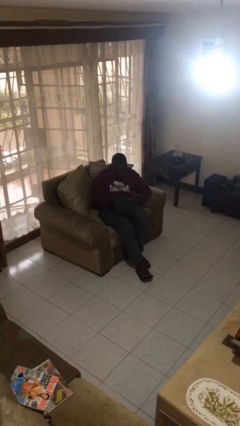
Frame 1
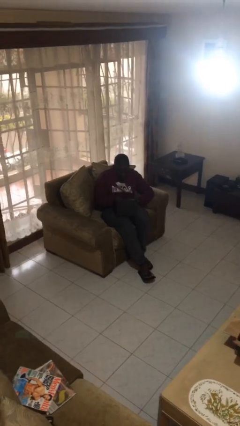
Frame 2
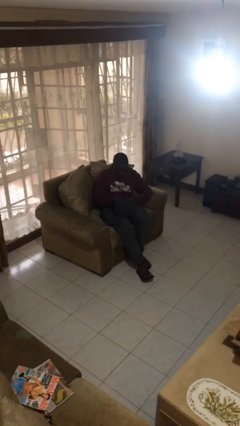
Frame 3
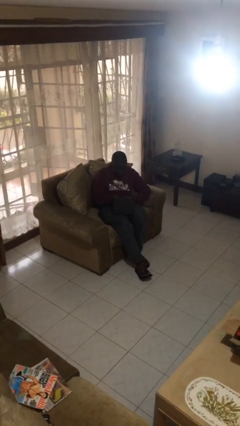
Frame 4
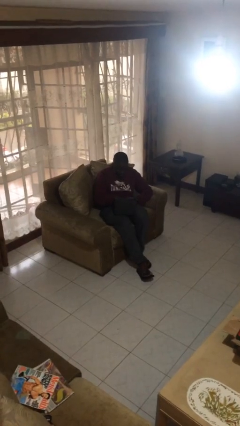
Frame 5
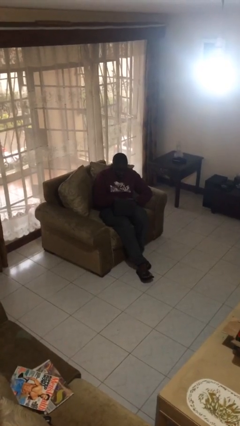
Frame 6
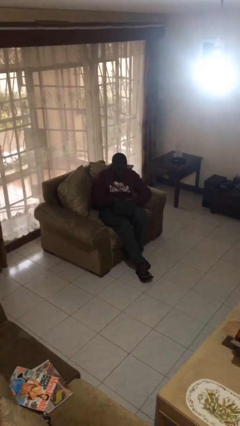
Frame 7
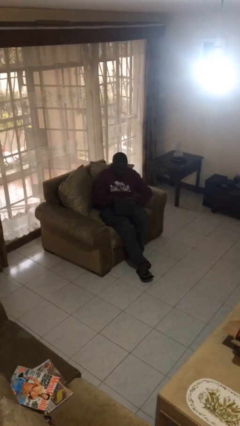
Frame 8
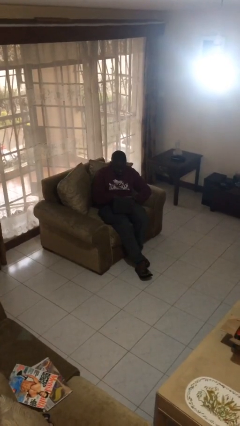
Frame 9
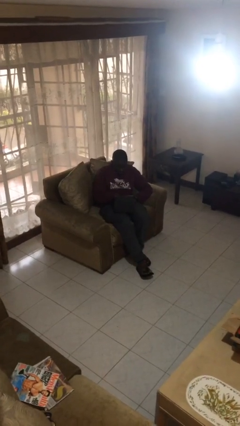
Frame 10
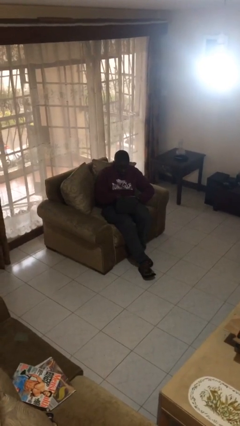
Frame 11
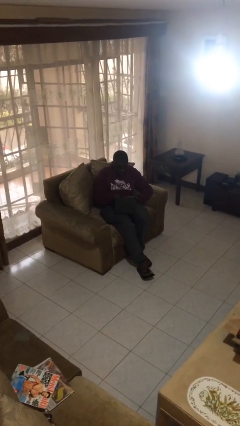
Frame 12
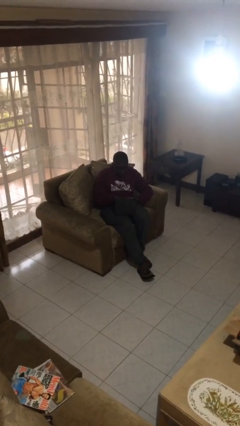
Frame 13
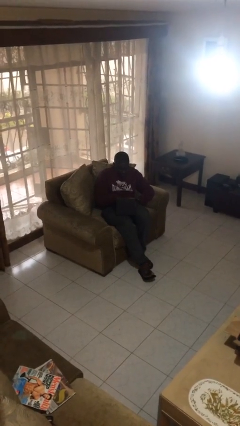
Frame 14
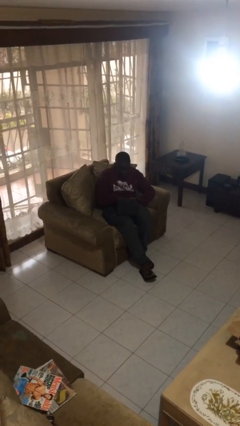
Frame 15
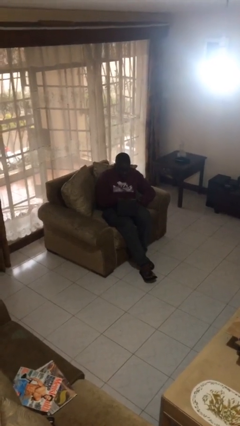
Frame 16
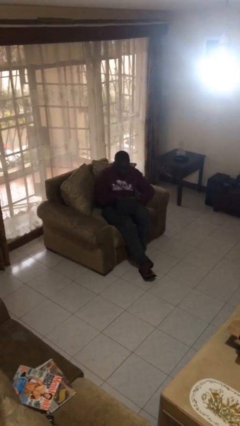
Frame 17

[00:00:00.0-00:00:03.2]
person searches jewelry box

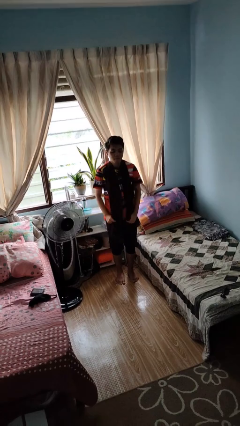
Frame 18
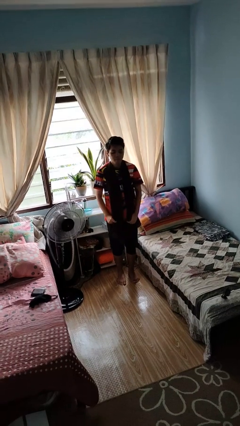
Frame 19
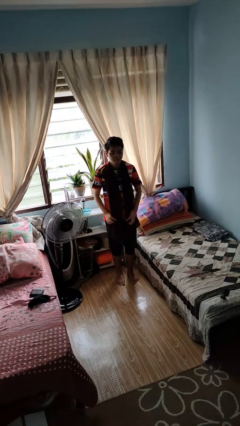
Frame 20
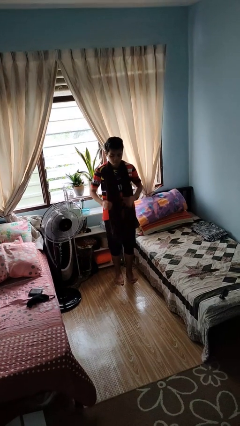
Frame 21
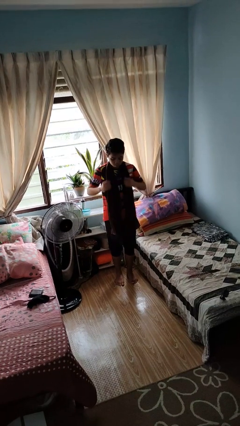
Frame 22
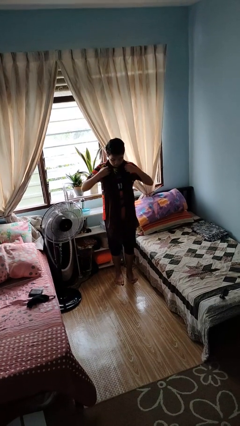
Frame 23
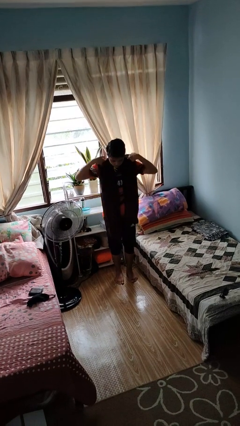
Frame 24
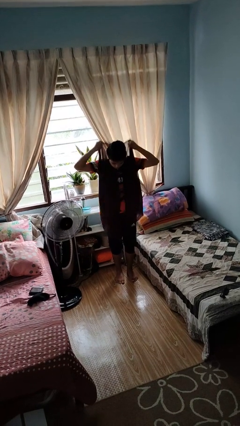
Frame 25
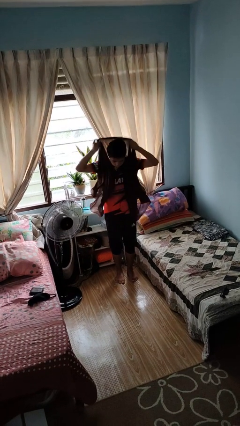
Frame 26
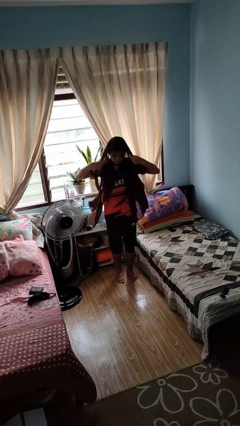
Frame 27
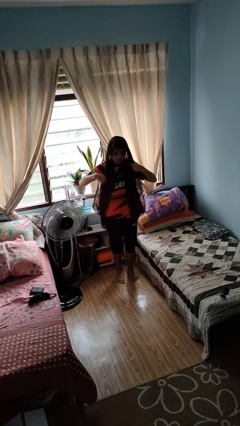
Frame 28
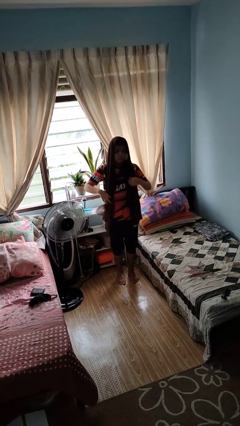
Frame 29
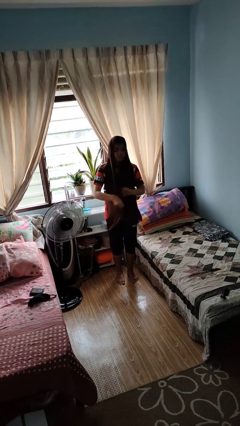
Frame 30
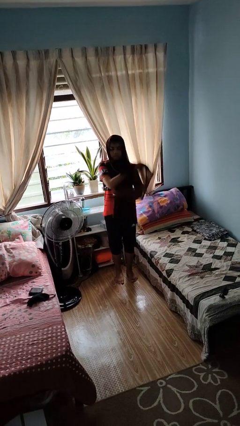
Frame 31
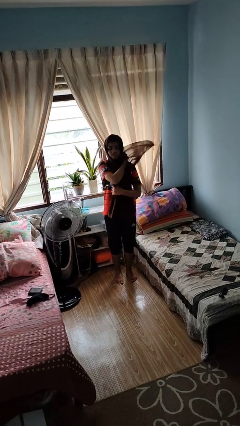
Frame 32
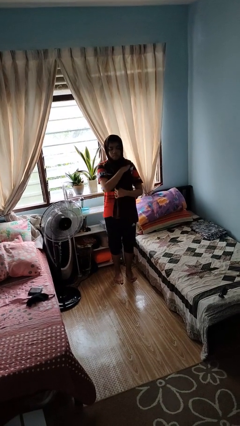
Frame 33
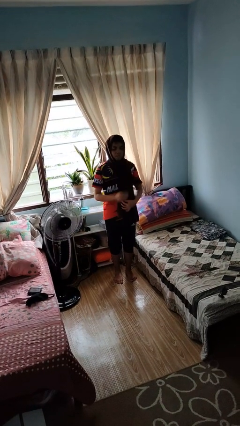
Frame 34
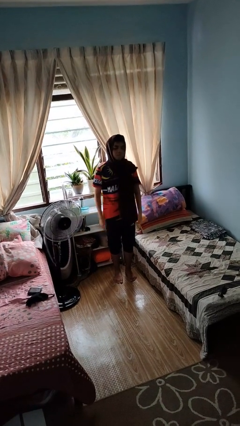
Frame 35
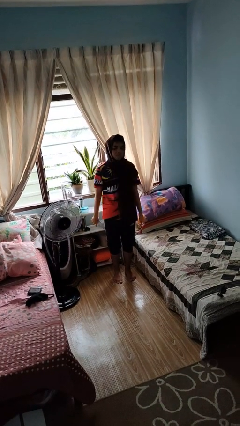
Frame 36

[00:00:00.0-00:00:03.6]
person puts on scarf

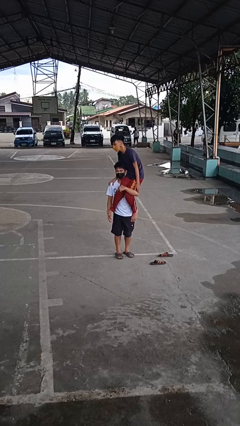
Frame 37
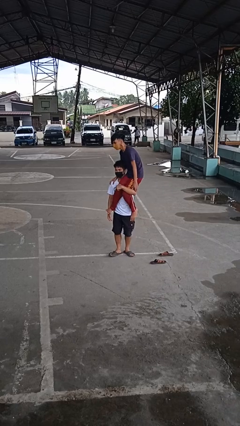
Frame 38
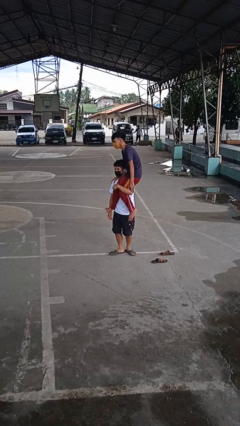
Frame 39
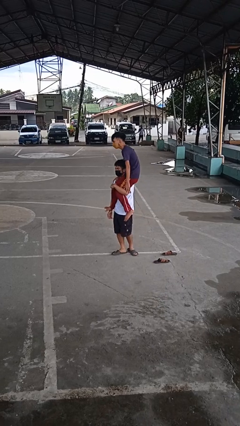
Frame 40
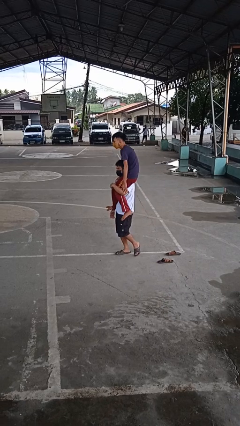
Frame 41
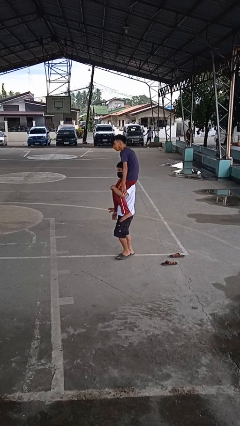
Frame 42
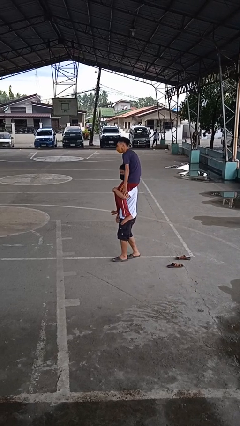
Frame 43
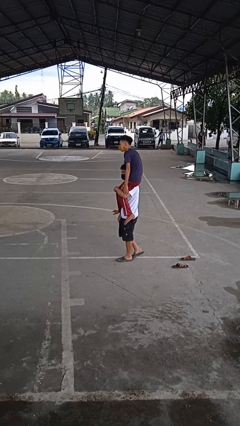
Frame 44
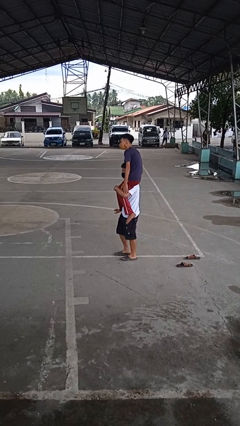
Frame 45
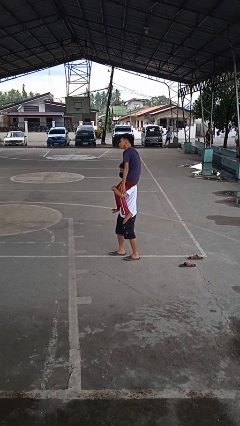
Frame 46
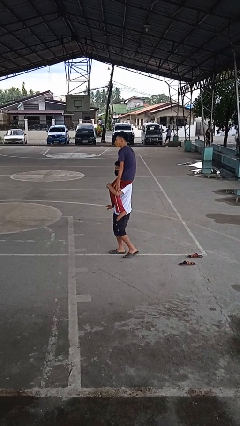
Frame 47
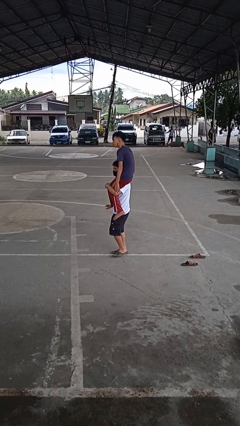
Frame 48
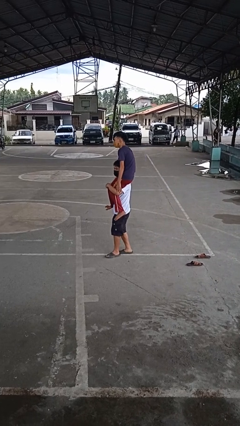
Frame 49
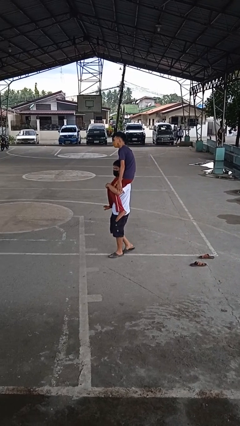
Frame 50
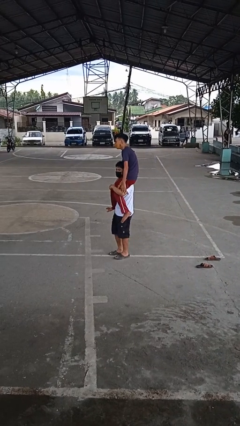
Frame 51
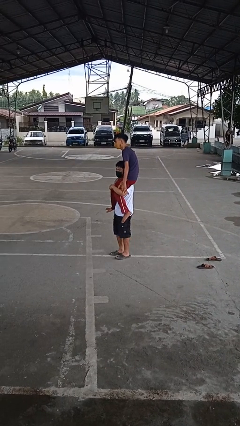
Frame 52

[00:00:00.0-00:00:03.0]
person carries person on shoulders

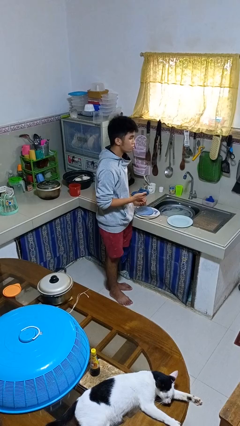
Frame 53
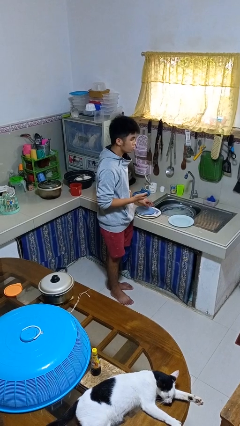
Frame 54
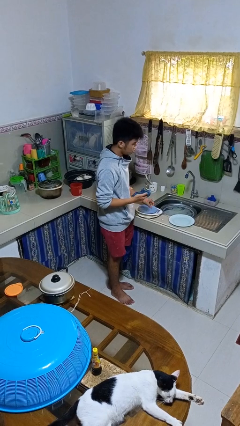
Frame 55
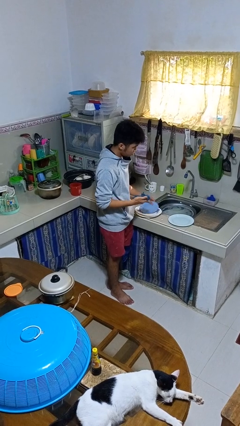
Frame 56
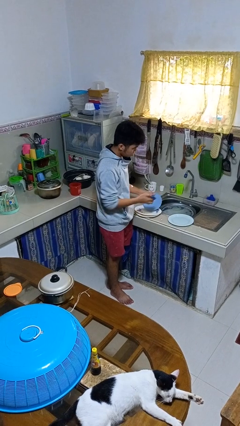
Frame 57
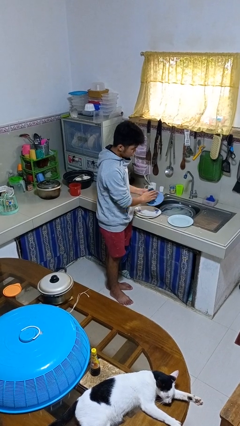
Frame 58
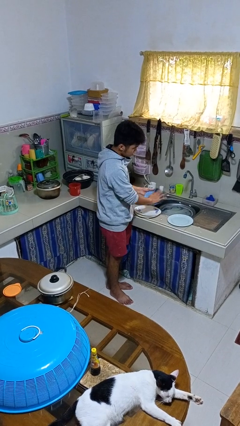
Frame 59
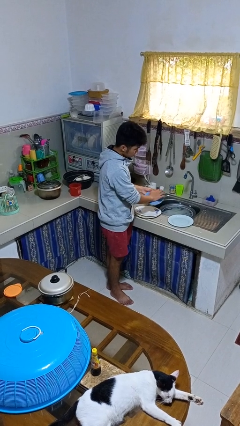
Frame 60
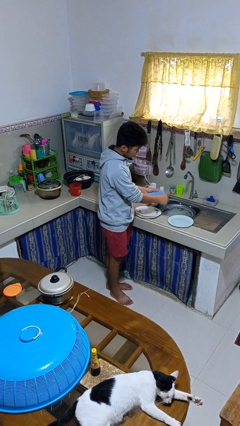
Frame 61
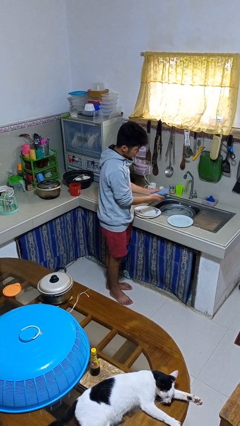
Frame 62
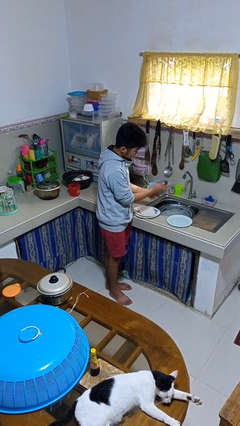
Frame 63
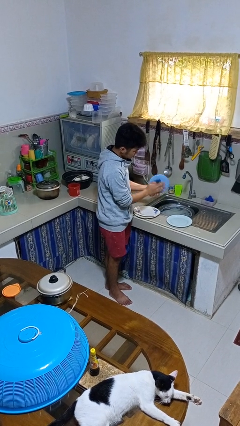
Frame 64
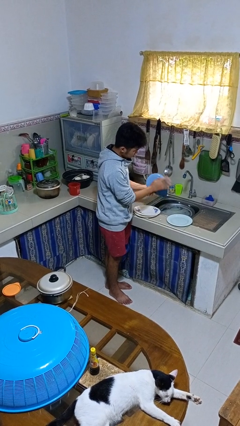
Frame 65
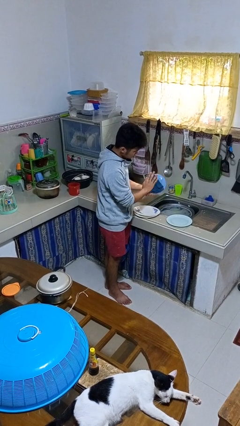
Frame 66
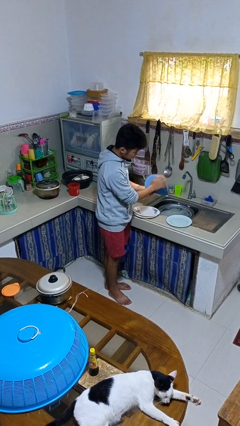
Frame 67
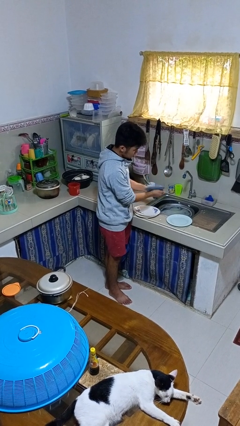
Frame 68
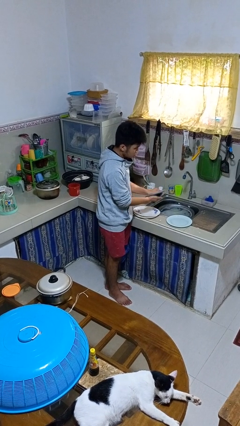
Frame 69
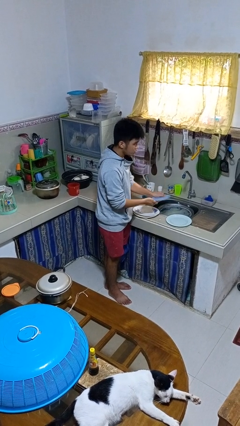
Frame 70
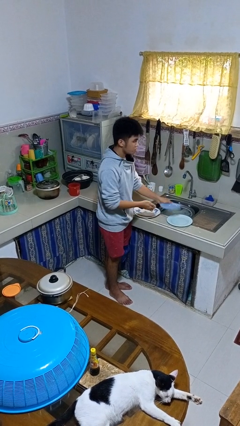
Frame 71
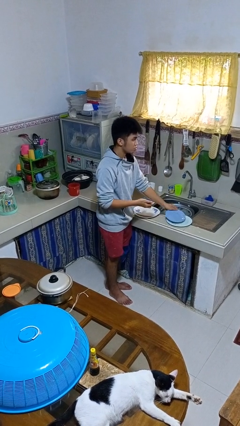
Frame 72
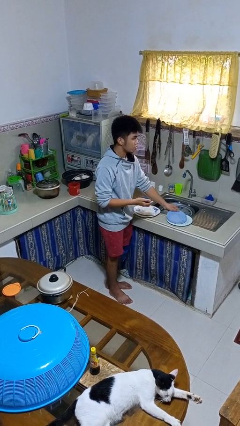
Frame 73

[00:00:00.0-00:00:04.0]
person dries dish

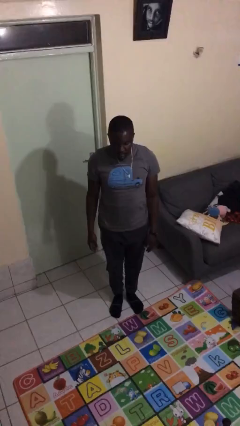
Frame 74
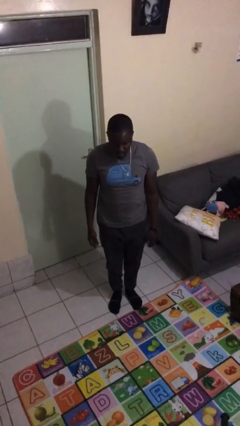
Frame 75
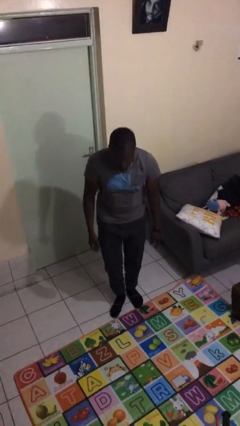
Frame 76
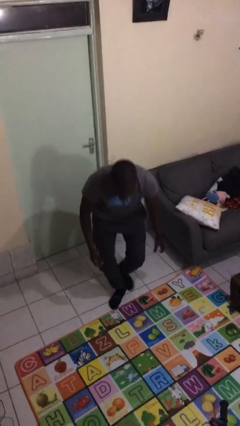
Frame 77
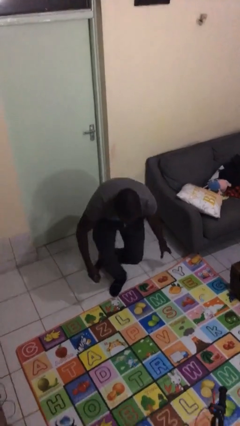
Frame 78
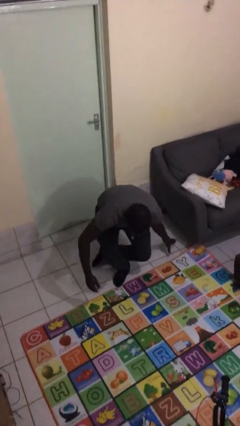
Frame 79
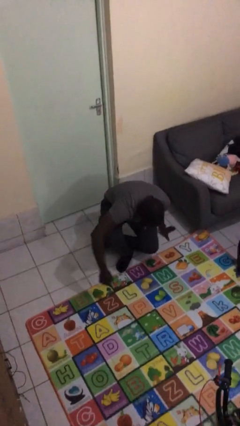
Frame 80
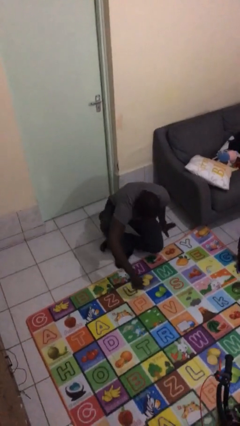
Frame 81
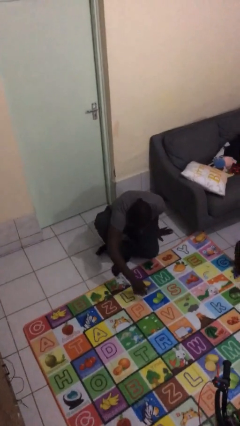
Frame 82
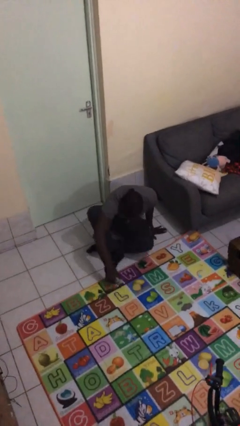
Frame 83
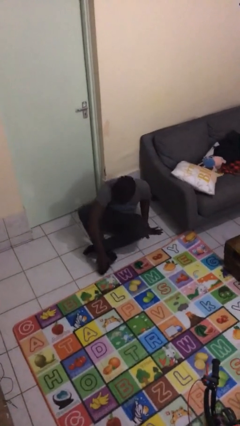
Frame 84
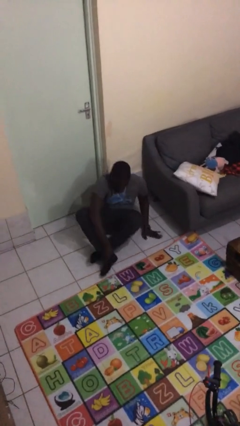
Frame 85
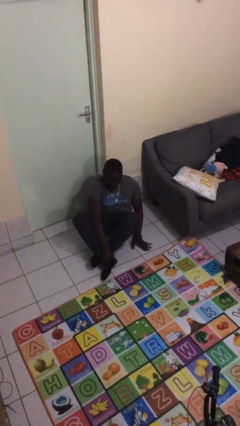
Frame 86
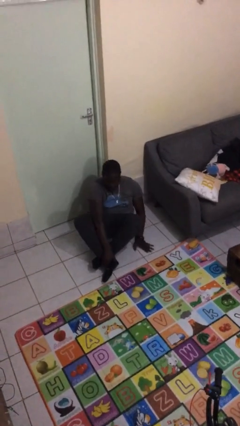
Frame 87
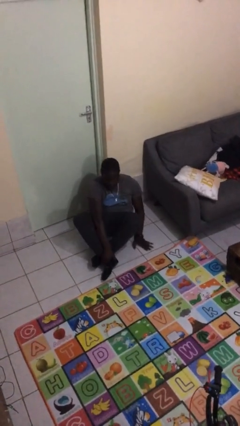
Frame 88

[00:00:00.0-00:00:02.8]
person sits crisscross

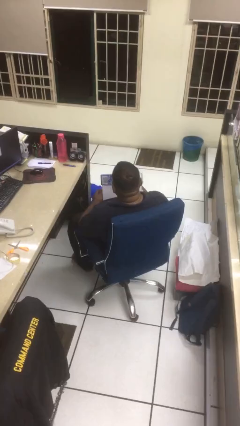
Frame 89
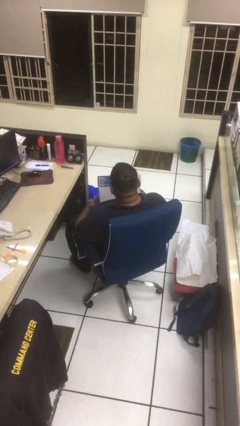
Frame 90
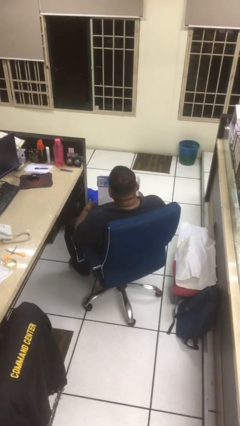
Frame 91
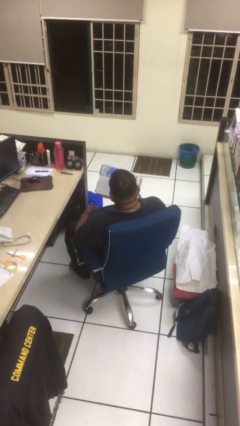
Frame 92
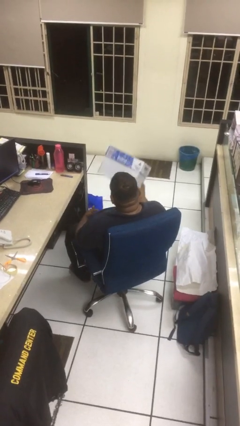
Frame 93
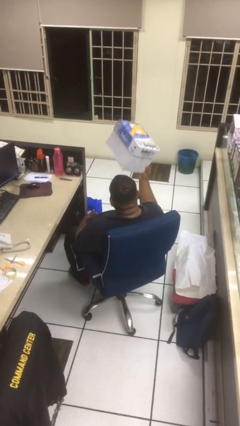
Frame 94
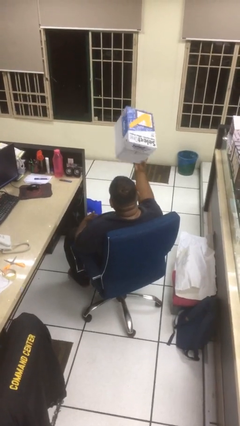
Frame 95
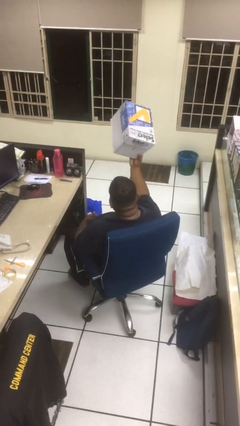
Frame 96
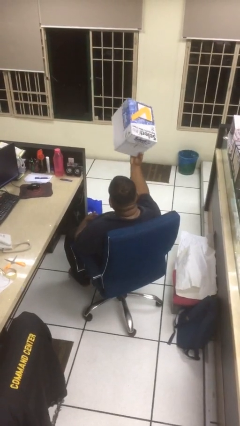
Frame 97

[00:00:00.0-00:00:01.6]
person holds object above head
